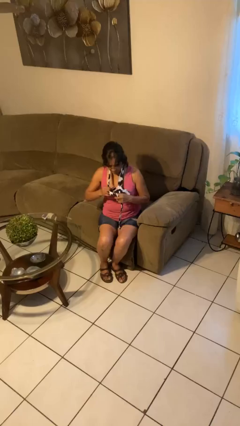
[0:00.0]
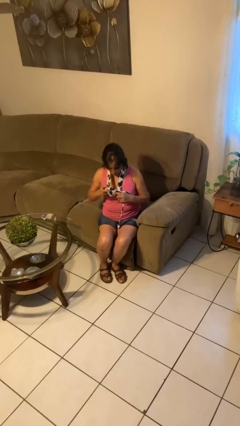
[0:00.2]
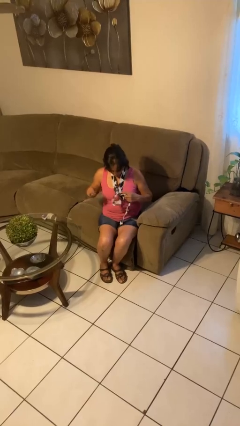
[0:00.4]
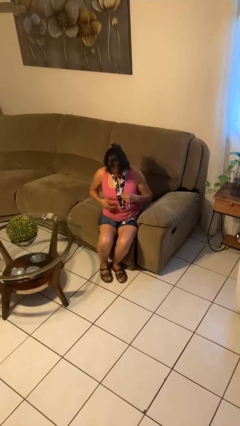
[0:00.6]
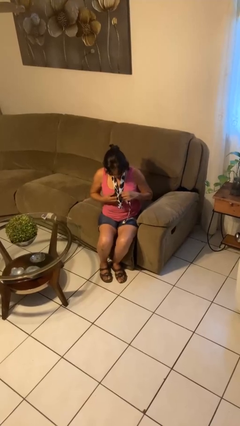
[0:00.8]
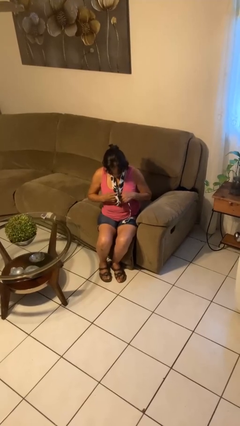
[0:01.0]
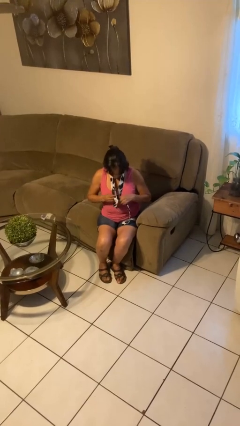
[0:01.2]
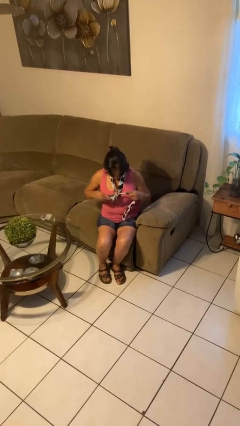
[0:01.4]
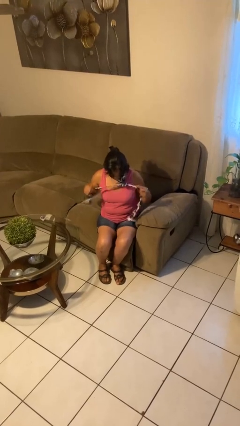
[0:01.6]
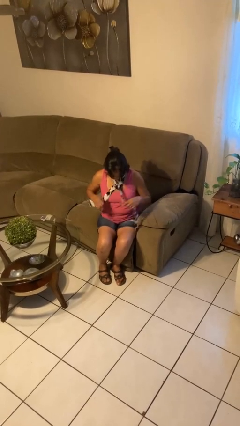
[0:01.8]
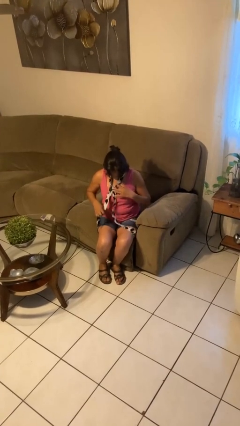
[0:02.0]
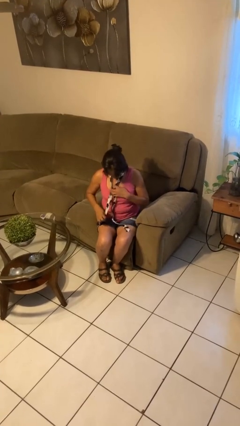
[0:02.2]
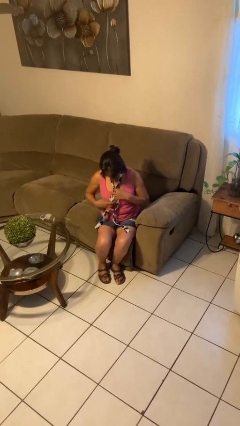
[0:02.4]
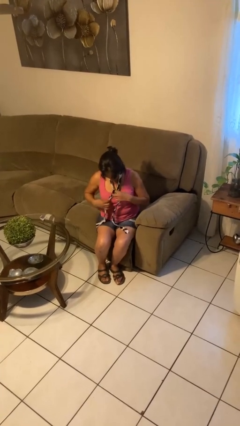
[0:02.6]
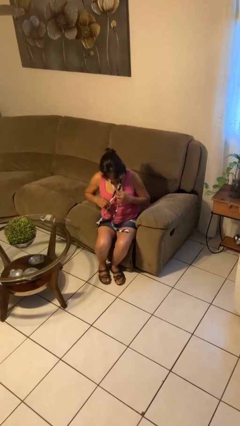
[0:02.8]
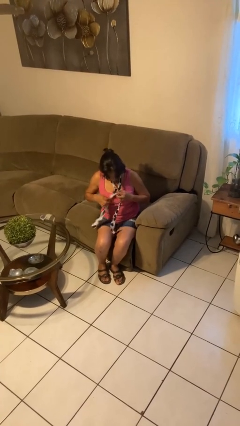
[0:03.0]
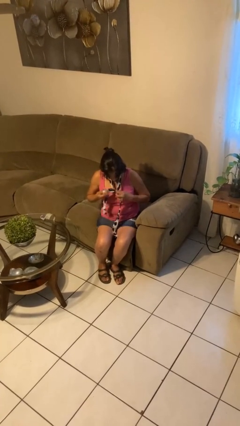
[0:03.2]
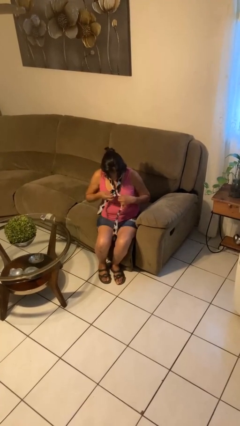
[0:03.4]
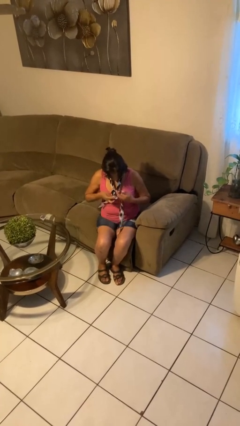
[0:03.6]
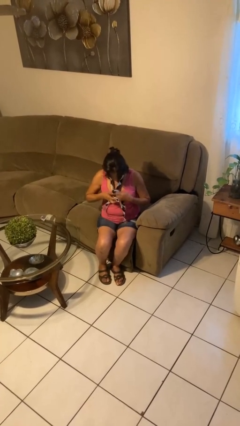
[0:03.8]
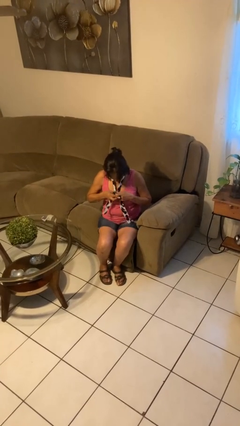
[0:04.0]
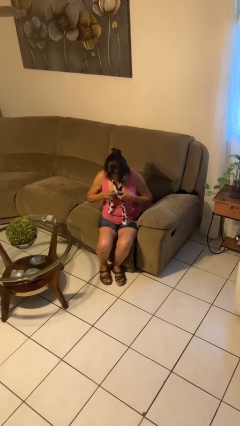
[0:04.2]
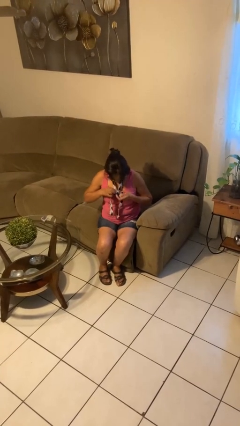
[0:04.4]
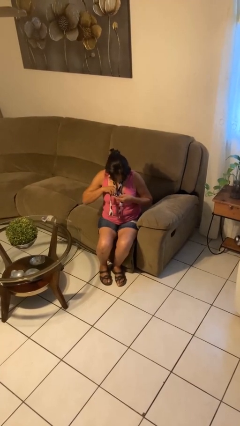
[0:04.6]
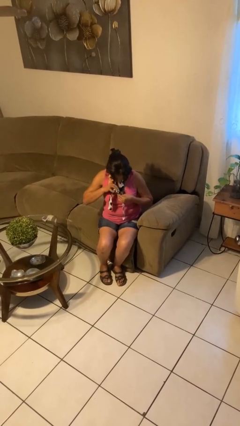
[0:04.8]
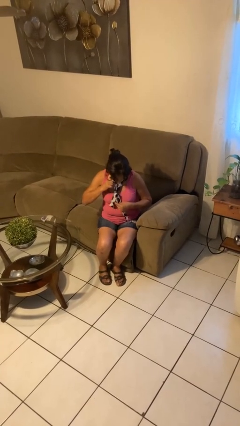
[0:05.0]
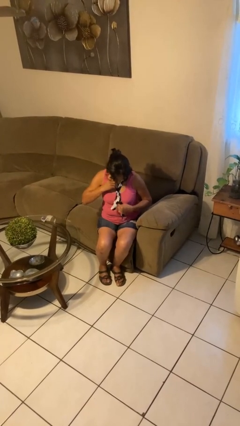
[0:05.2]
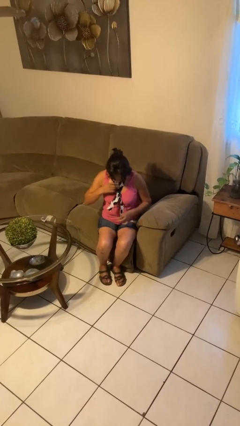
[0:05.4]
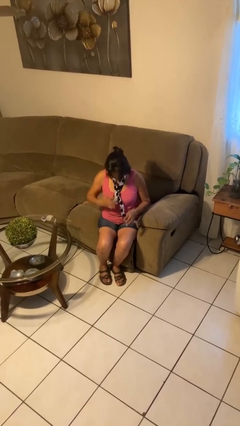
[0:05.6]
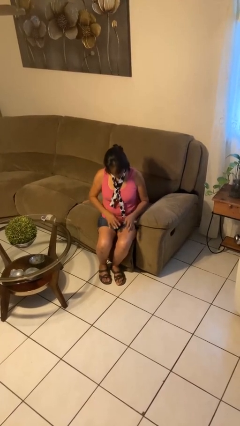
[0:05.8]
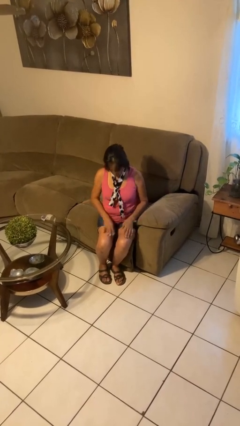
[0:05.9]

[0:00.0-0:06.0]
person puts on necktie

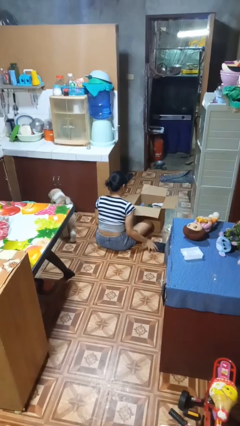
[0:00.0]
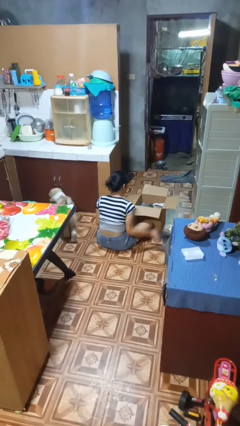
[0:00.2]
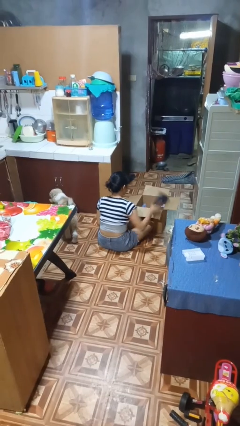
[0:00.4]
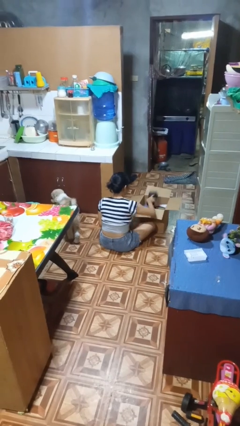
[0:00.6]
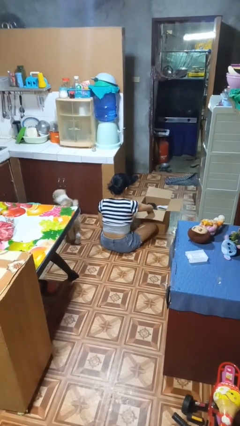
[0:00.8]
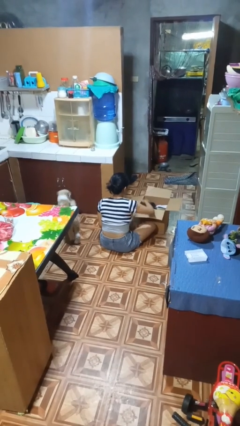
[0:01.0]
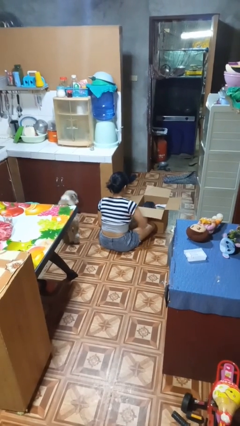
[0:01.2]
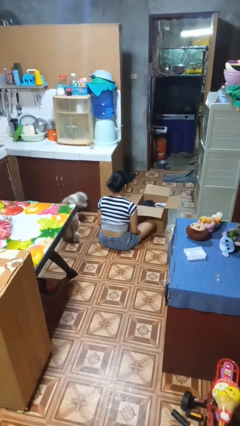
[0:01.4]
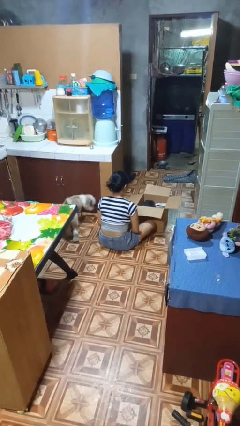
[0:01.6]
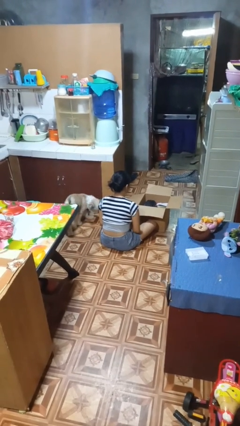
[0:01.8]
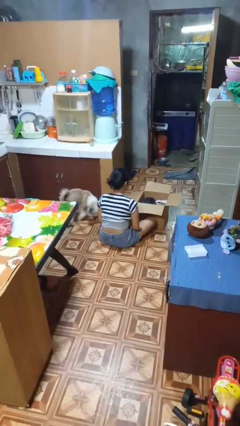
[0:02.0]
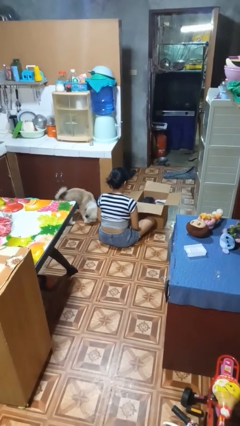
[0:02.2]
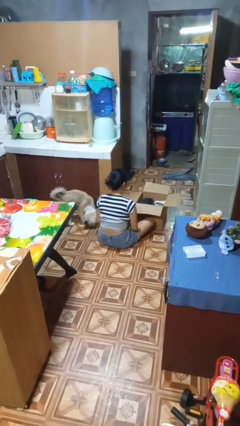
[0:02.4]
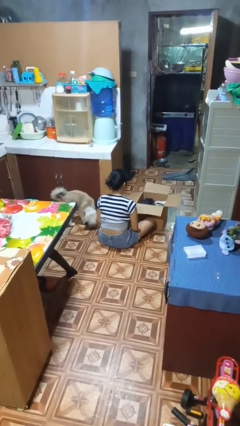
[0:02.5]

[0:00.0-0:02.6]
person puts object into box

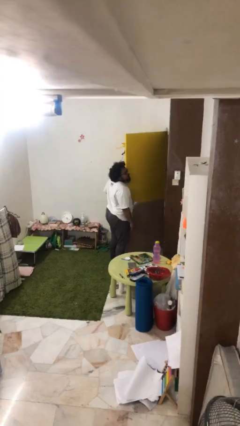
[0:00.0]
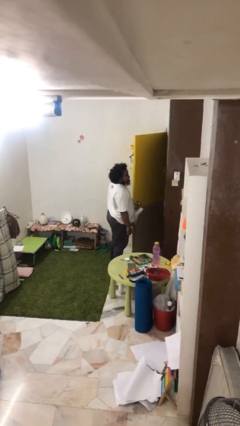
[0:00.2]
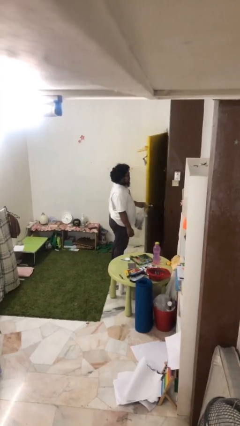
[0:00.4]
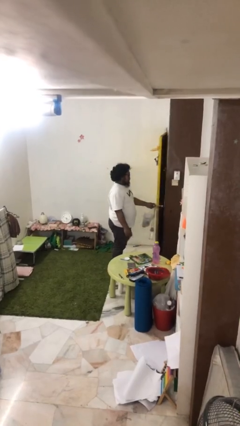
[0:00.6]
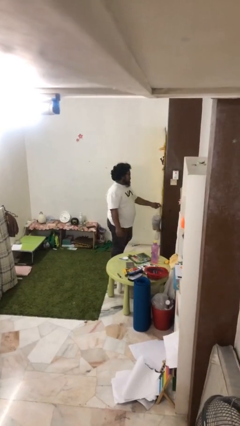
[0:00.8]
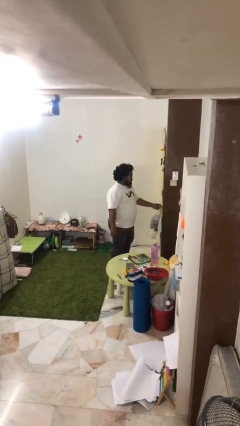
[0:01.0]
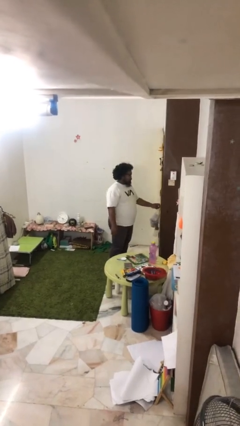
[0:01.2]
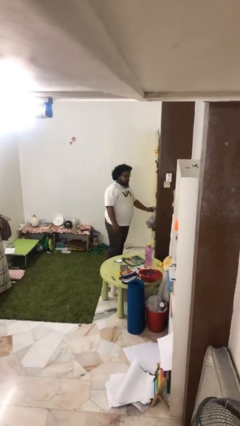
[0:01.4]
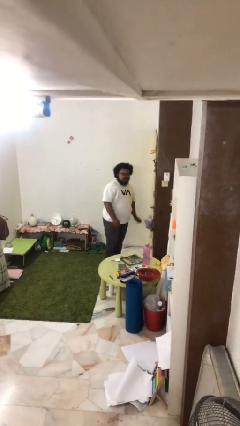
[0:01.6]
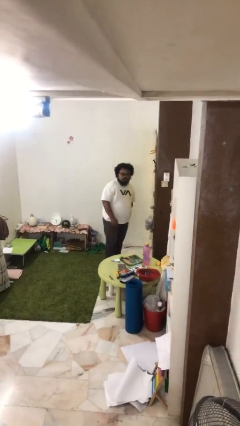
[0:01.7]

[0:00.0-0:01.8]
person closes facility door

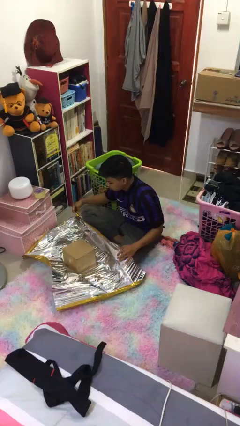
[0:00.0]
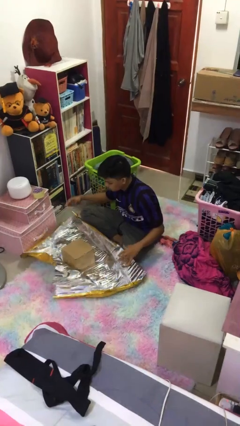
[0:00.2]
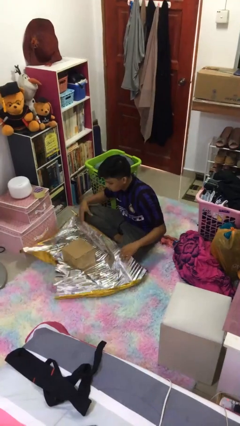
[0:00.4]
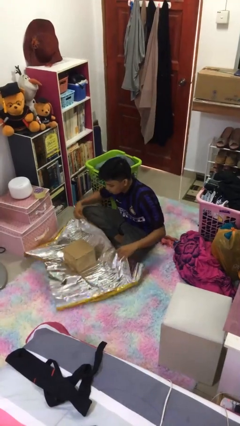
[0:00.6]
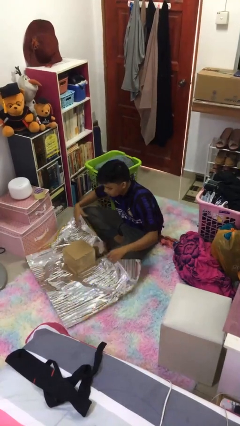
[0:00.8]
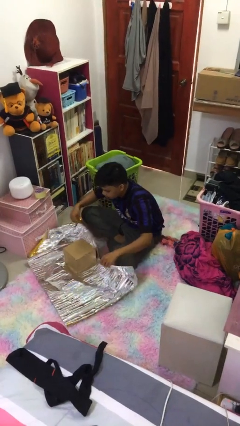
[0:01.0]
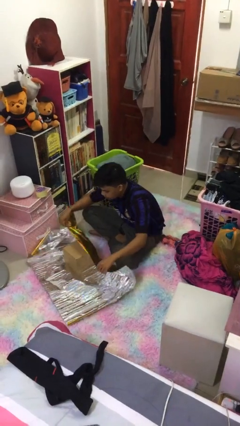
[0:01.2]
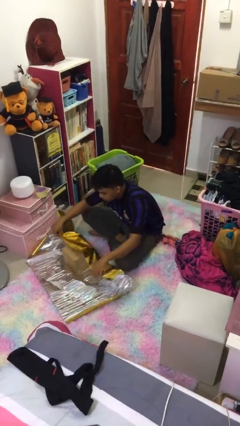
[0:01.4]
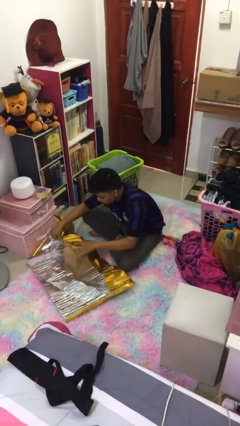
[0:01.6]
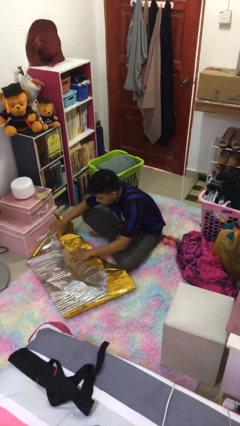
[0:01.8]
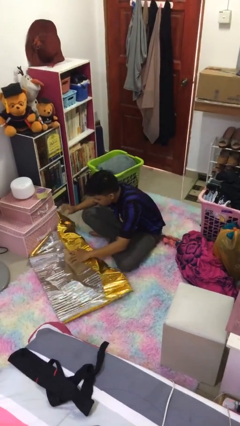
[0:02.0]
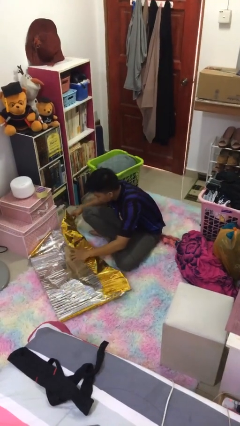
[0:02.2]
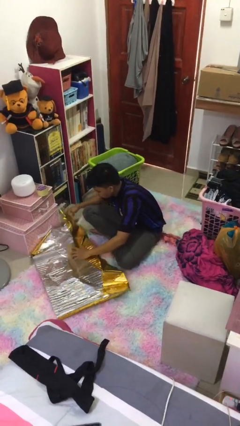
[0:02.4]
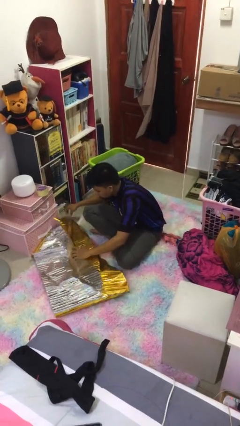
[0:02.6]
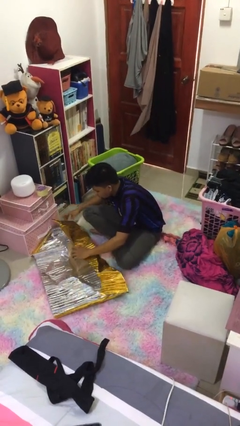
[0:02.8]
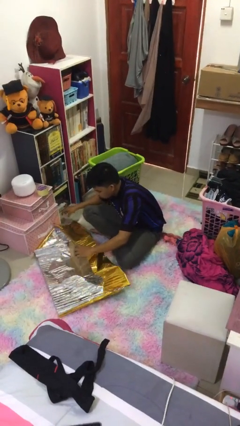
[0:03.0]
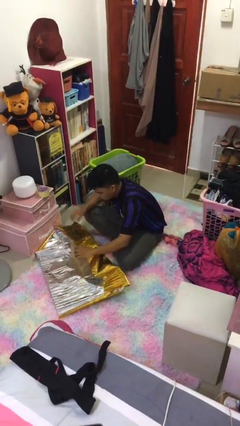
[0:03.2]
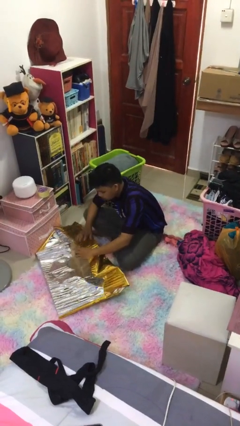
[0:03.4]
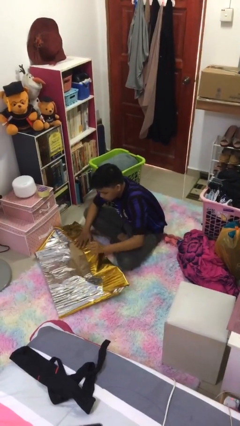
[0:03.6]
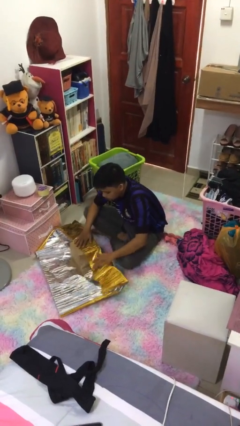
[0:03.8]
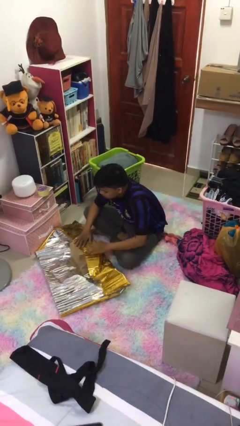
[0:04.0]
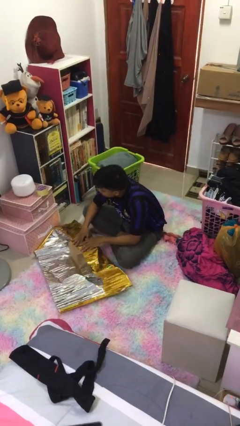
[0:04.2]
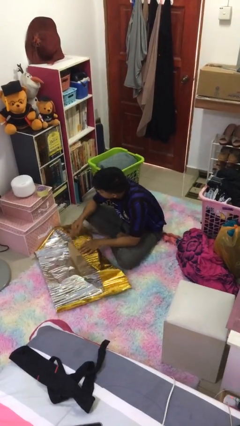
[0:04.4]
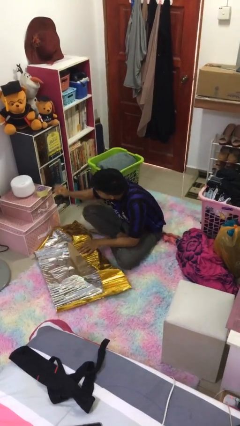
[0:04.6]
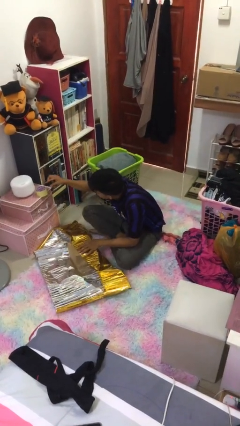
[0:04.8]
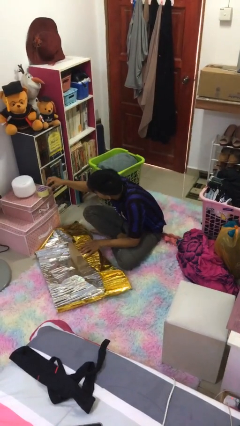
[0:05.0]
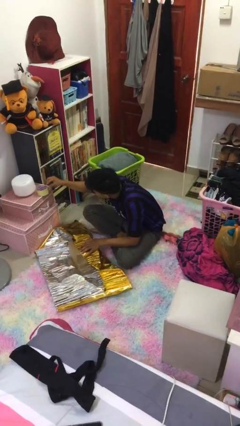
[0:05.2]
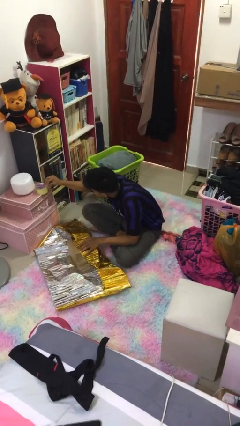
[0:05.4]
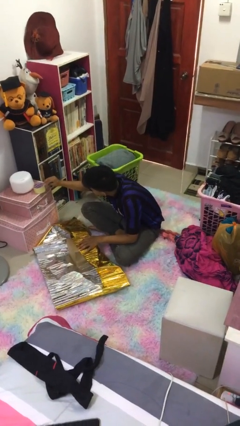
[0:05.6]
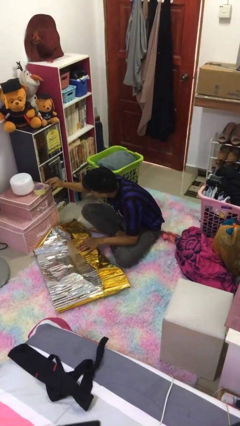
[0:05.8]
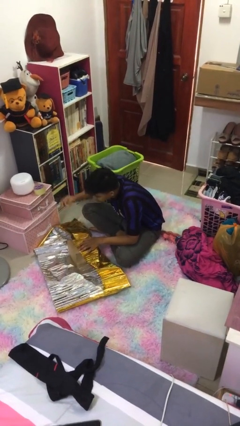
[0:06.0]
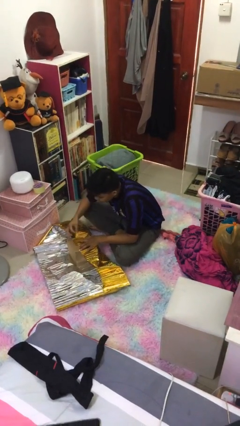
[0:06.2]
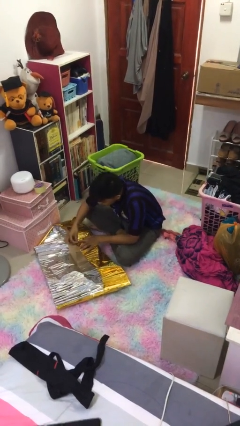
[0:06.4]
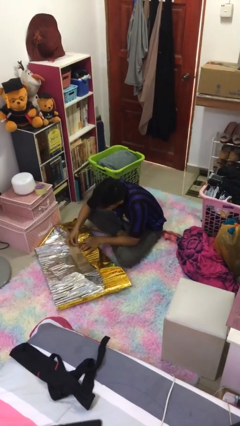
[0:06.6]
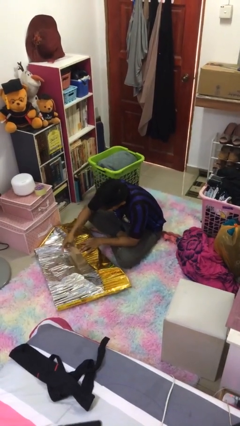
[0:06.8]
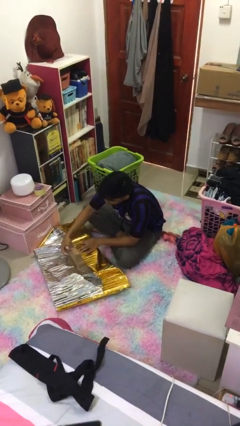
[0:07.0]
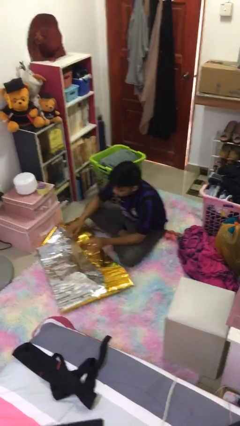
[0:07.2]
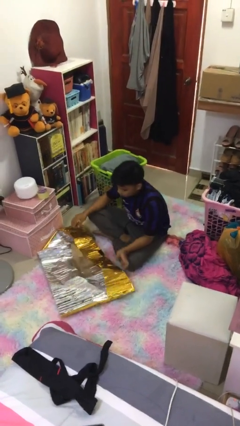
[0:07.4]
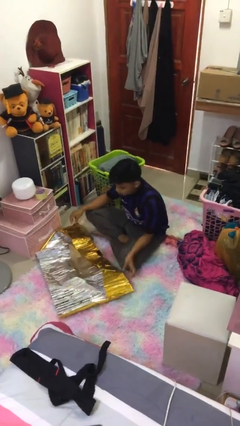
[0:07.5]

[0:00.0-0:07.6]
person wraps box
